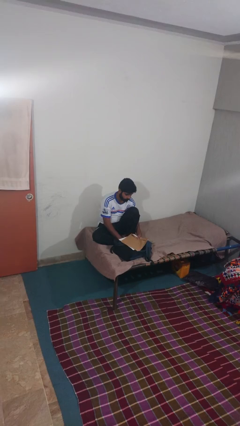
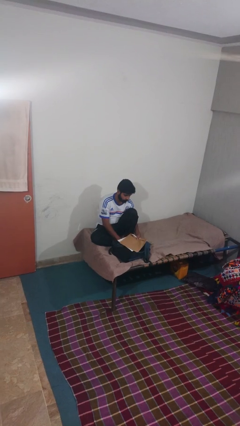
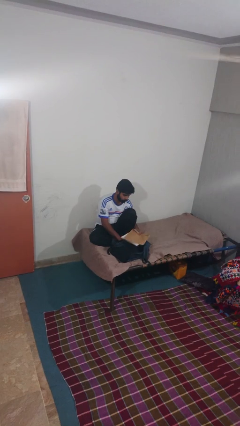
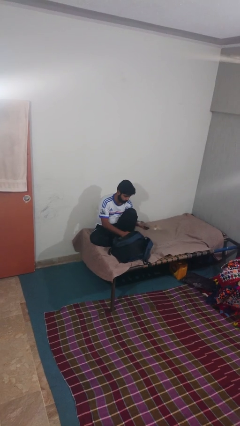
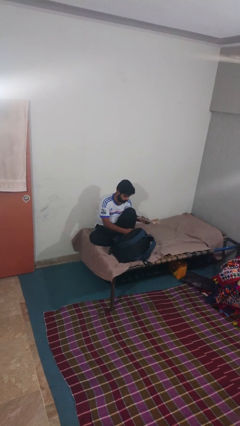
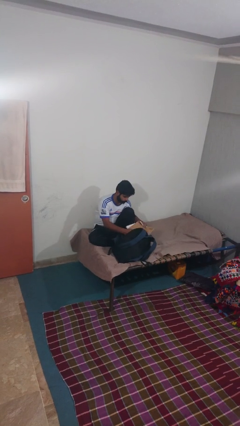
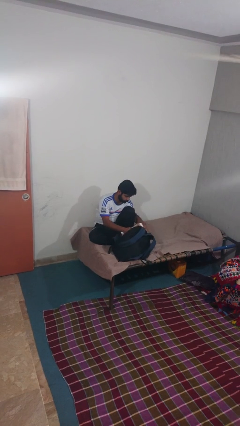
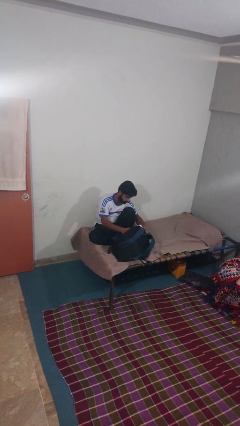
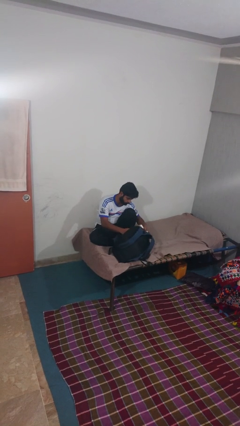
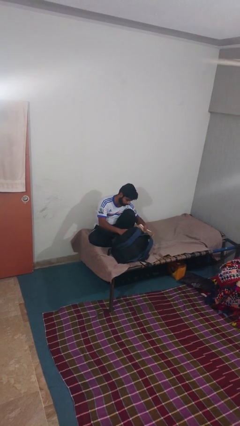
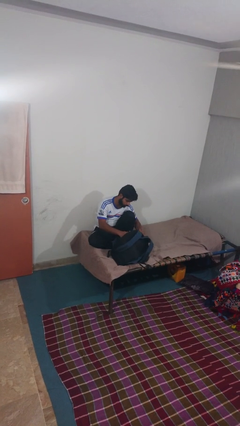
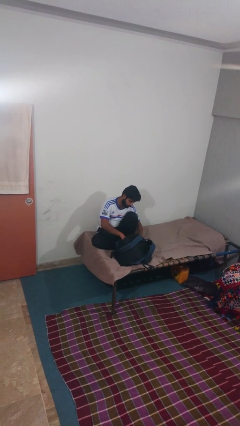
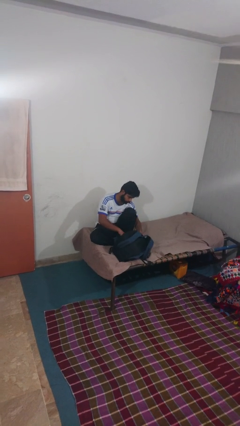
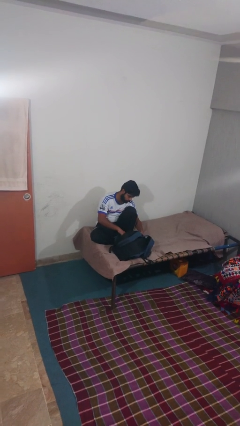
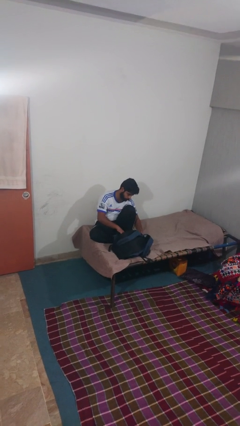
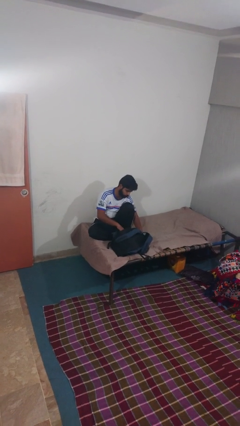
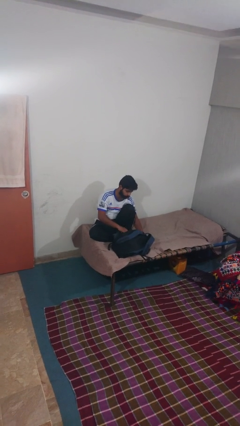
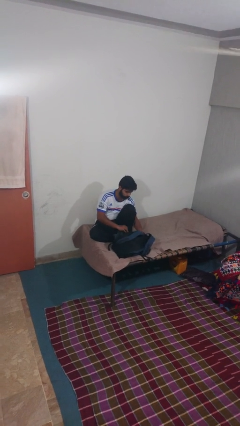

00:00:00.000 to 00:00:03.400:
person puts object into backpack

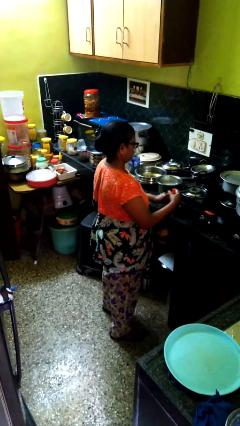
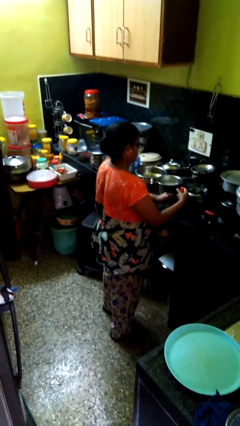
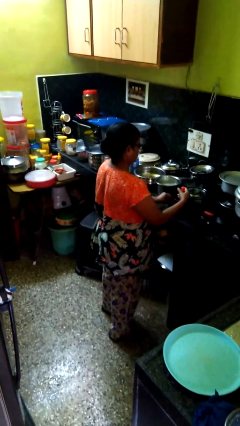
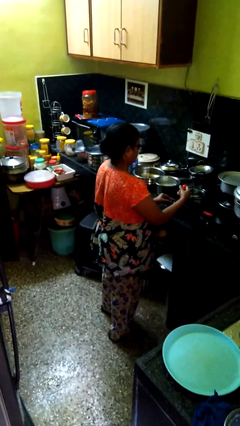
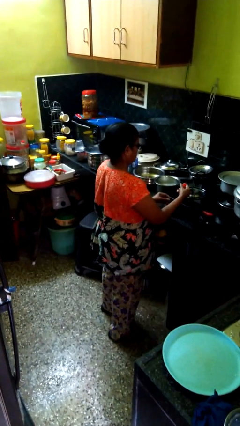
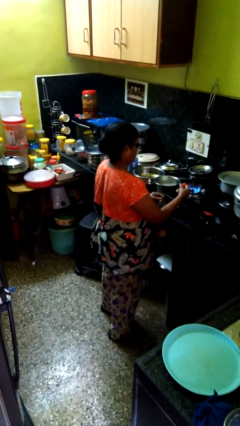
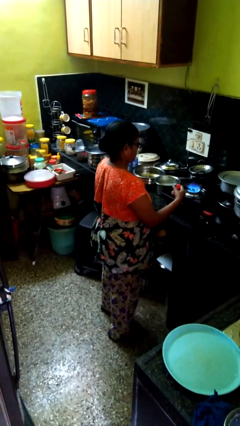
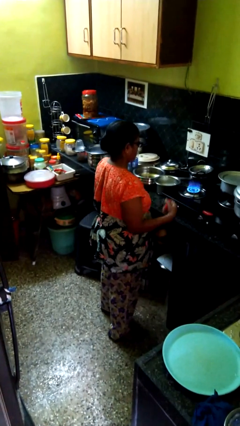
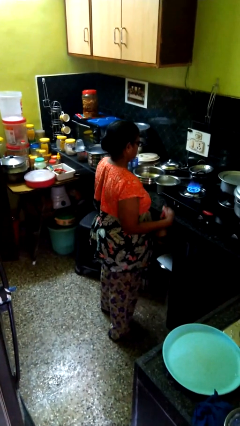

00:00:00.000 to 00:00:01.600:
person turns on stovetop

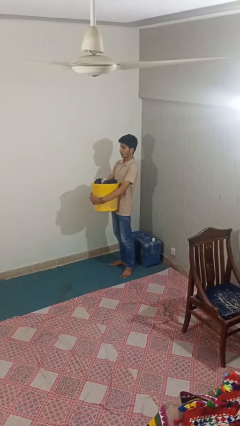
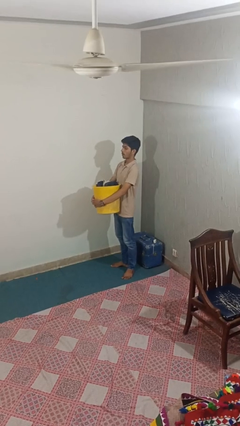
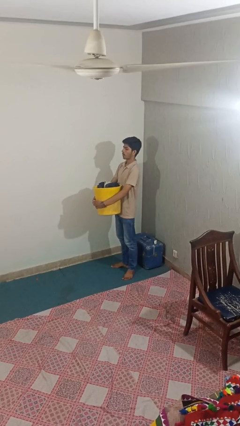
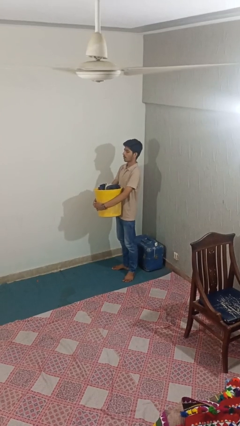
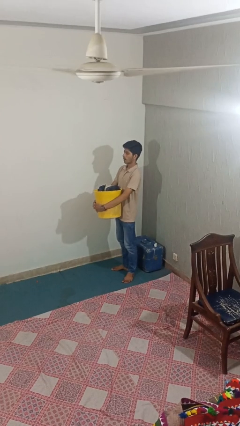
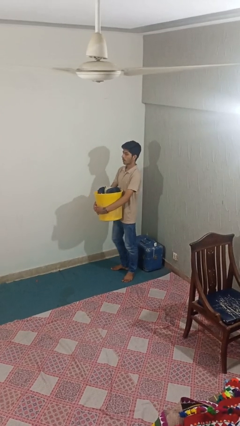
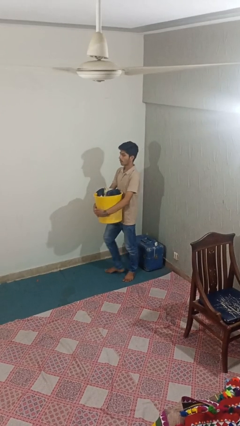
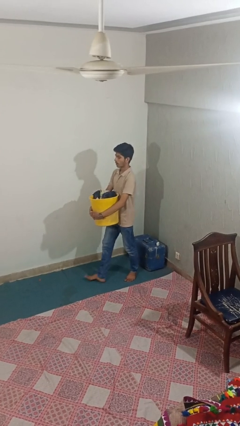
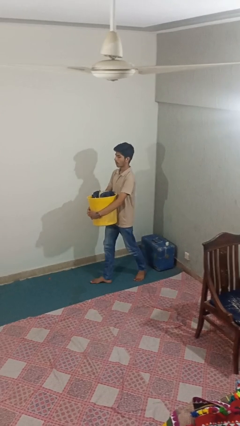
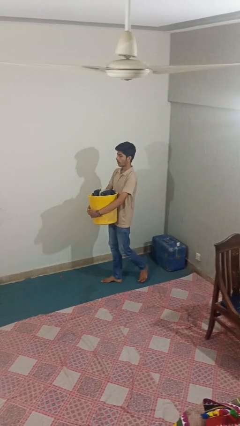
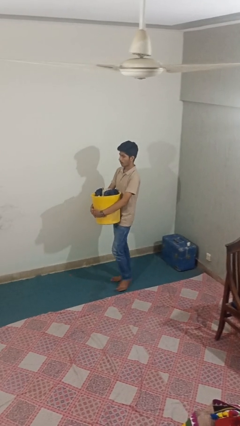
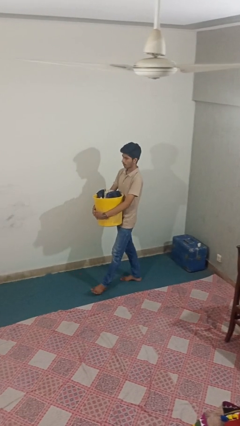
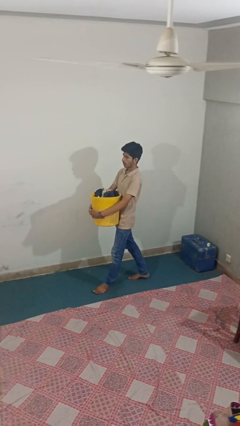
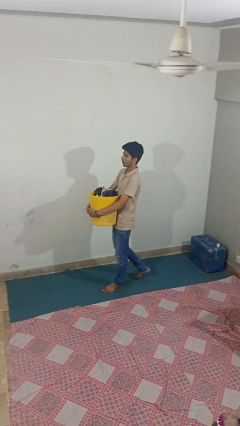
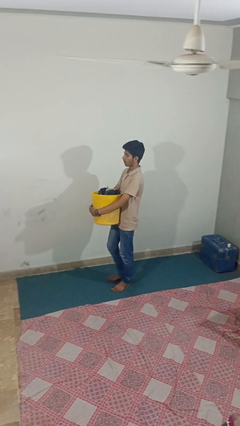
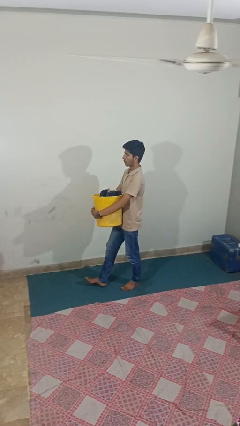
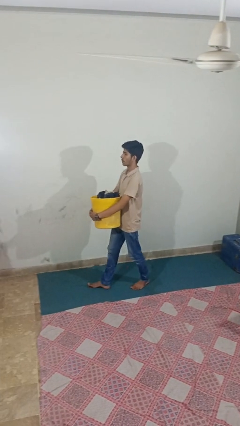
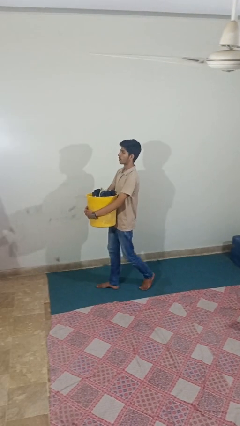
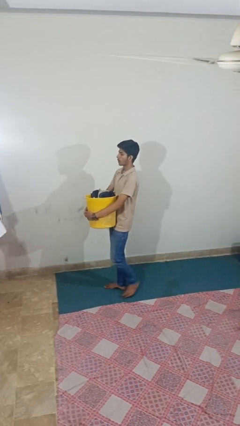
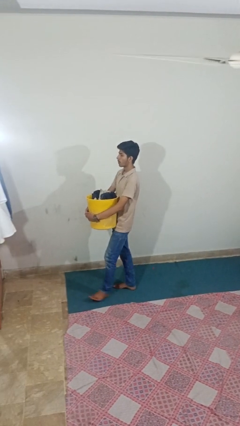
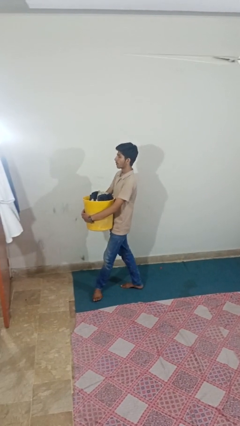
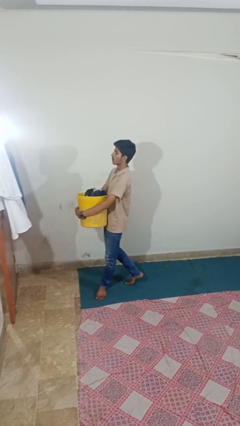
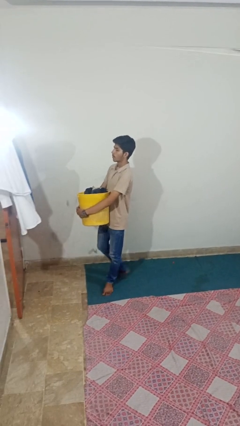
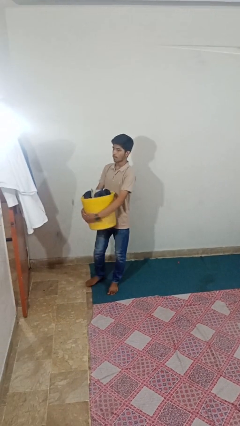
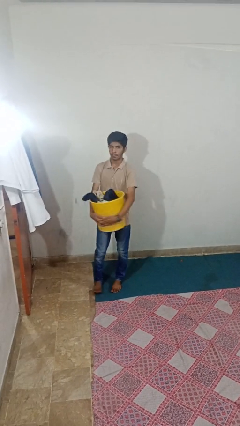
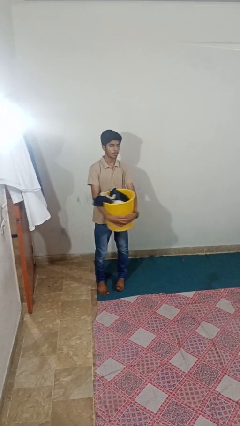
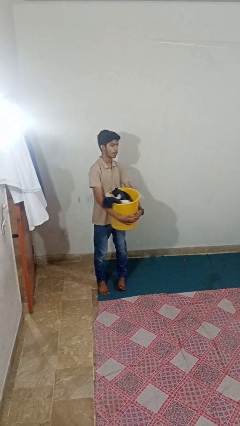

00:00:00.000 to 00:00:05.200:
person carries laundry basket

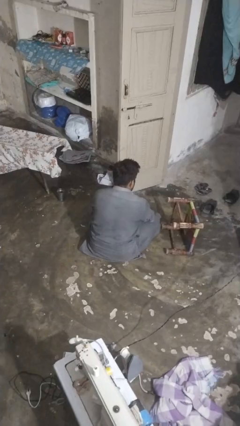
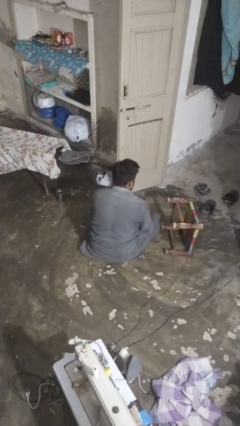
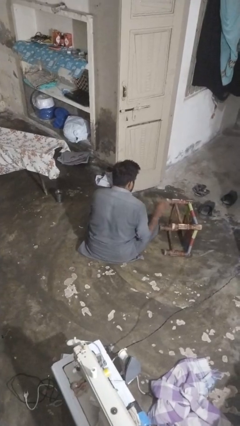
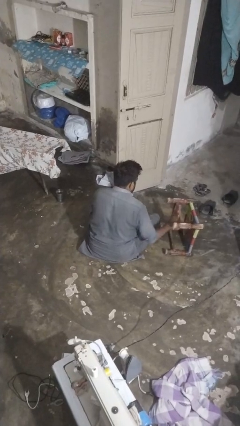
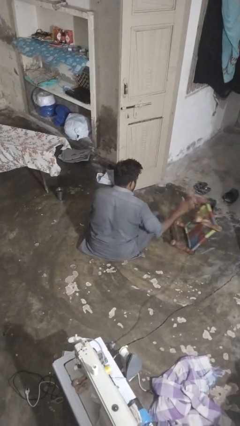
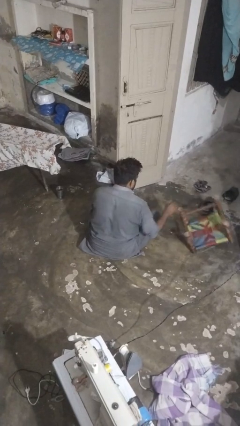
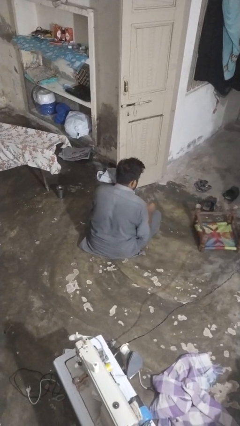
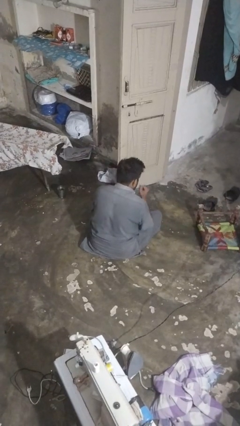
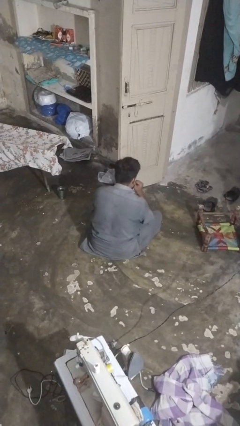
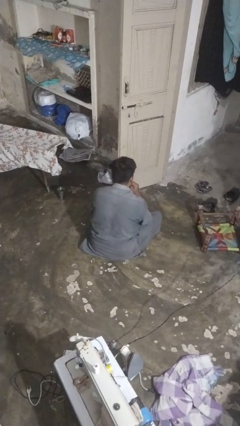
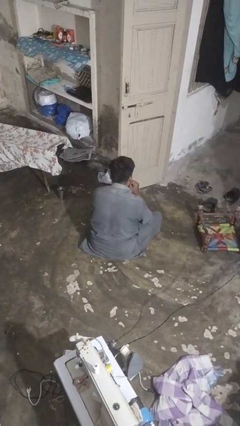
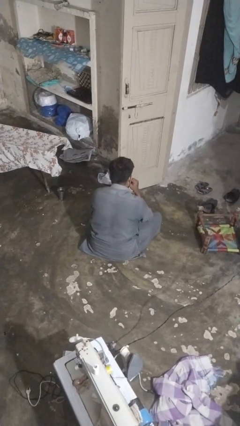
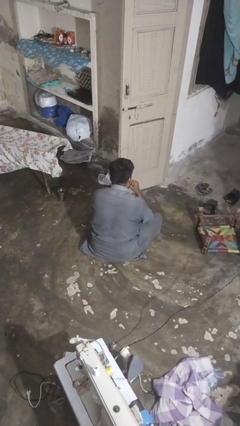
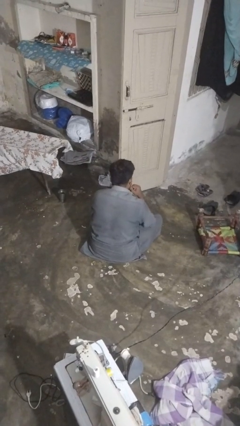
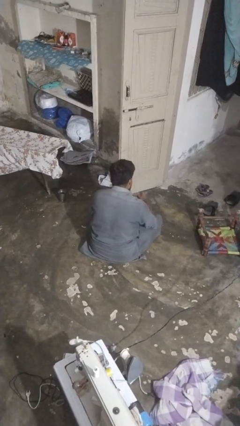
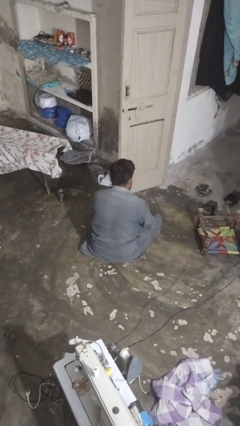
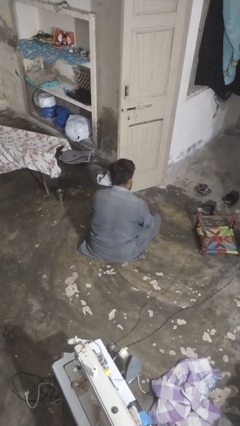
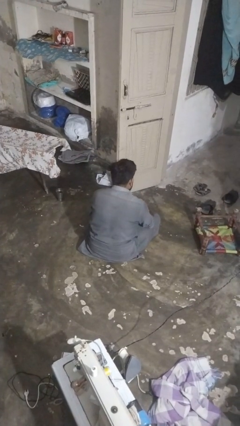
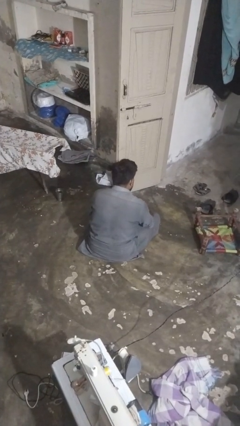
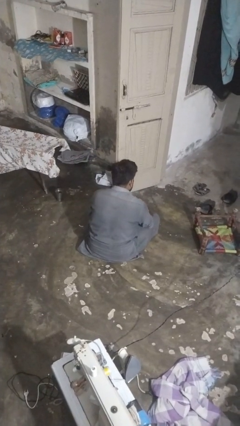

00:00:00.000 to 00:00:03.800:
person knocks over furniture

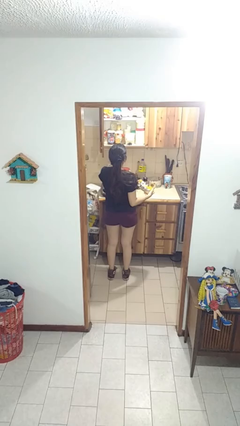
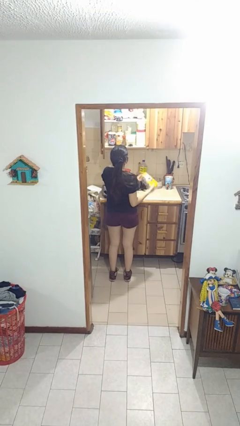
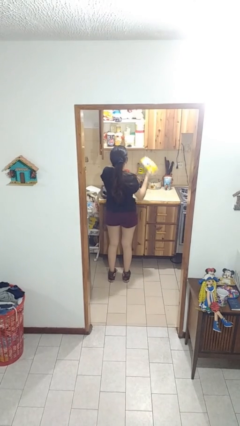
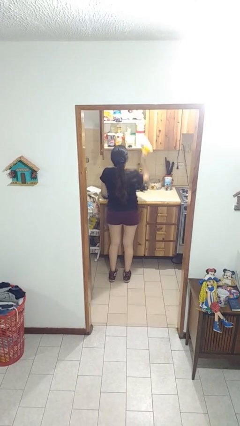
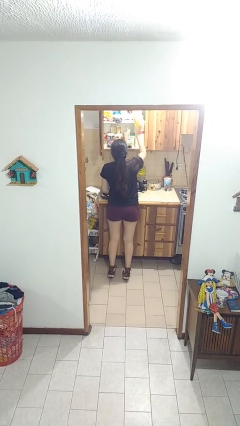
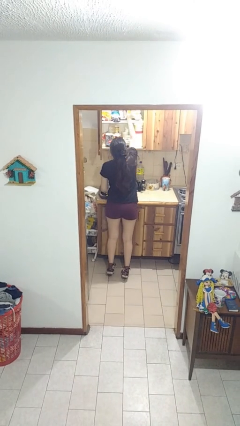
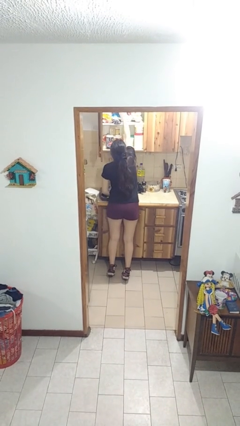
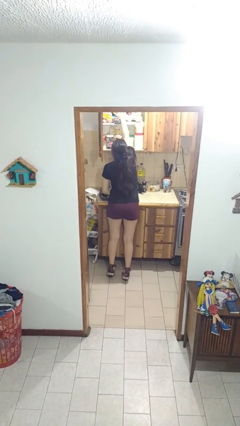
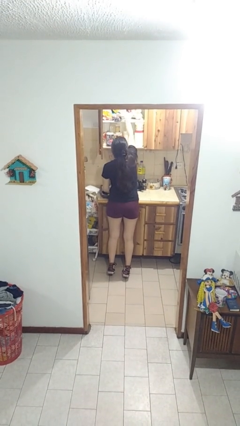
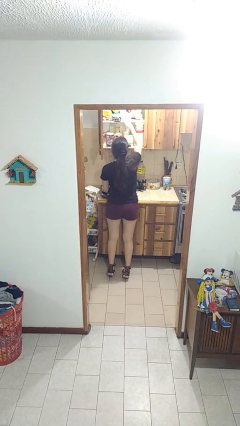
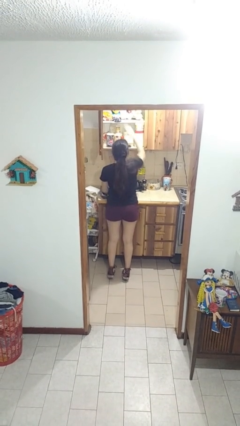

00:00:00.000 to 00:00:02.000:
person puts object in cabinet

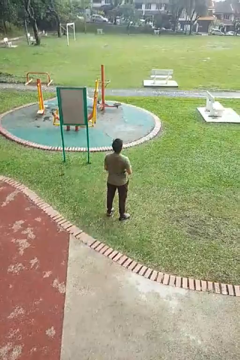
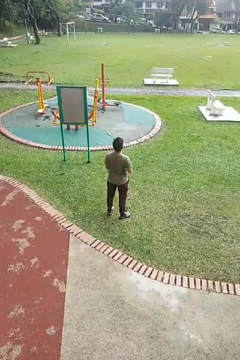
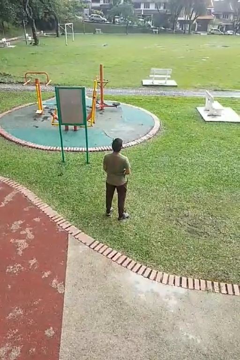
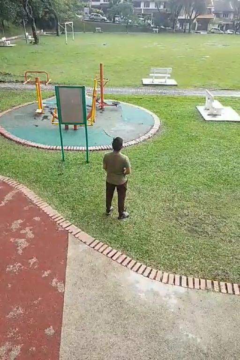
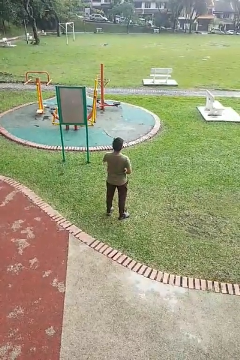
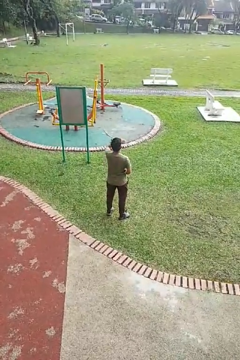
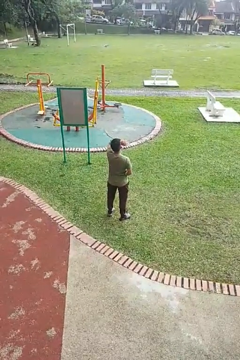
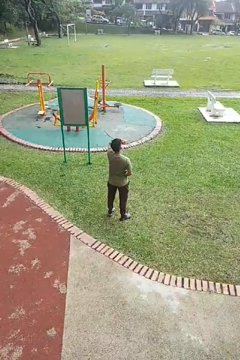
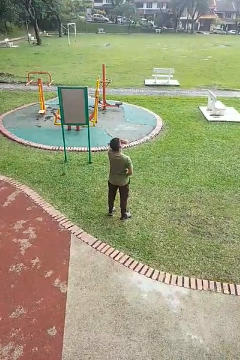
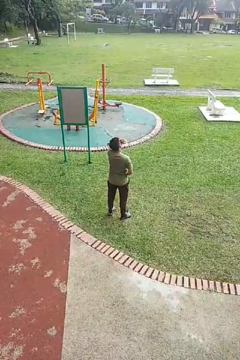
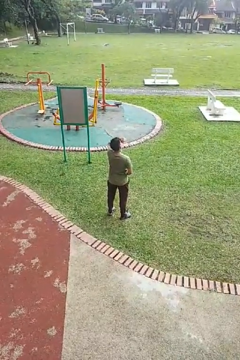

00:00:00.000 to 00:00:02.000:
person rubs eyes
